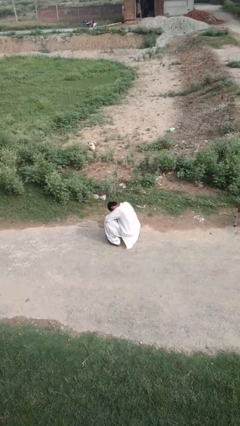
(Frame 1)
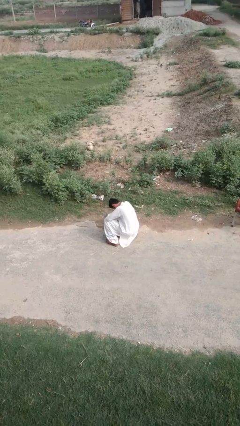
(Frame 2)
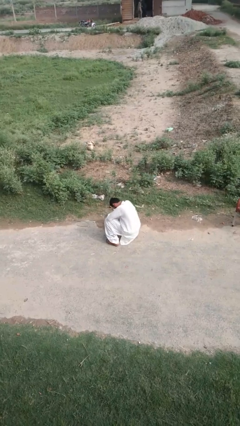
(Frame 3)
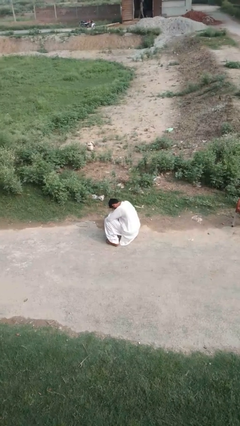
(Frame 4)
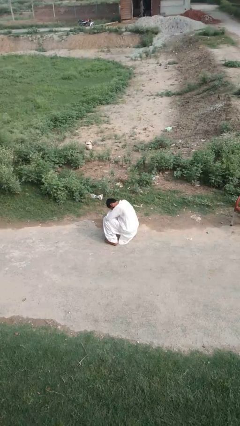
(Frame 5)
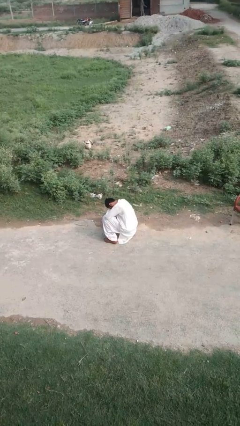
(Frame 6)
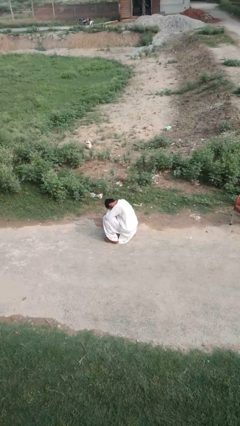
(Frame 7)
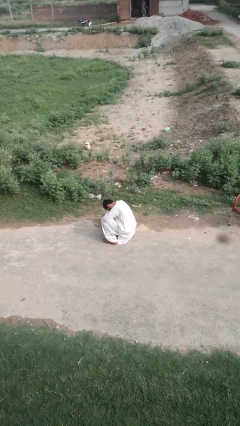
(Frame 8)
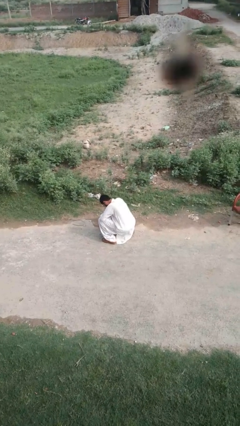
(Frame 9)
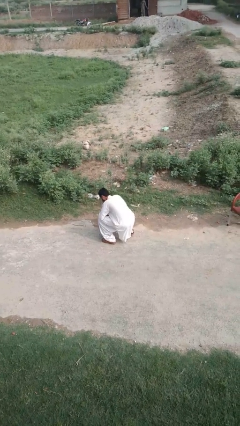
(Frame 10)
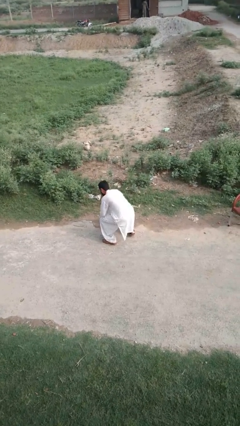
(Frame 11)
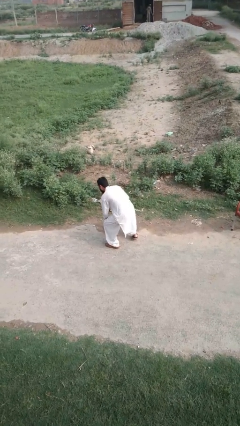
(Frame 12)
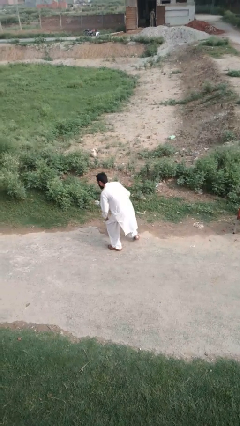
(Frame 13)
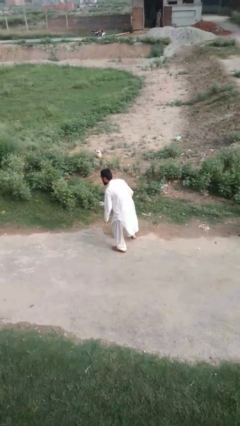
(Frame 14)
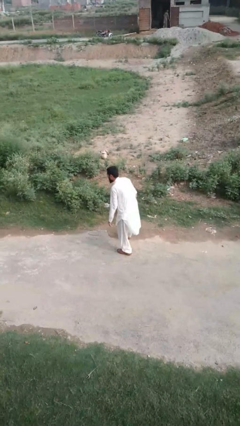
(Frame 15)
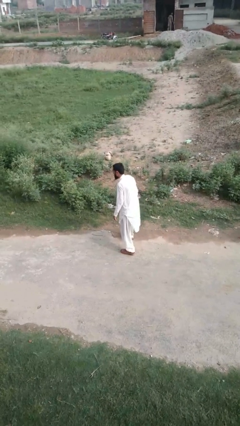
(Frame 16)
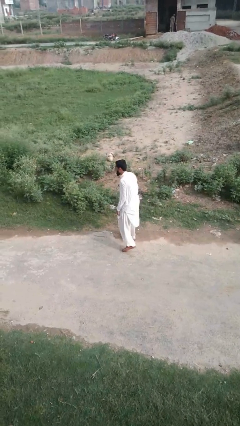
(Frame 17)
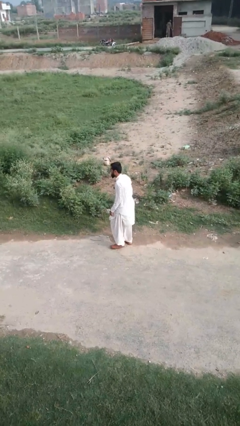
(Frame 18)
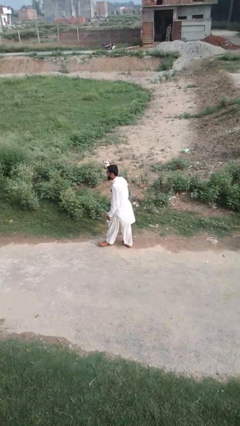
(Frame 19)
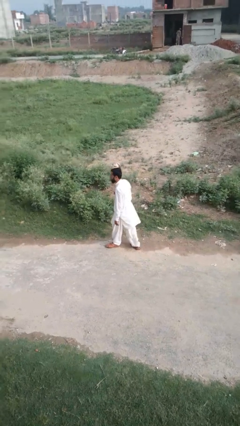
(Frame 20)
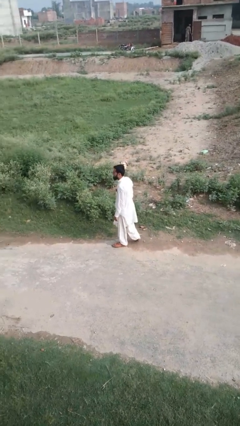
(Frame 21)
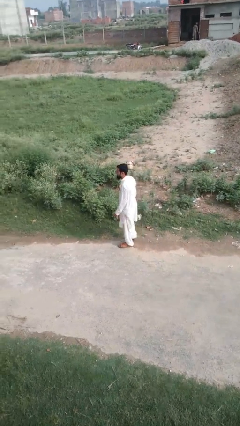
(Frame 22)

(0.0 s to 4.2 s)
person stands up from floor

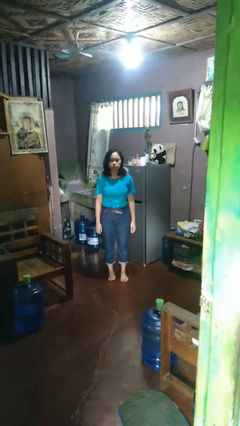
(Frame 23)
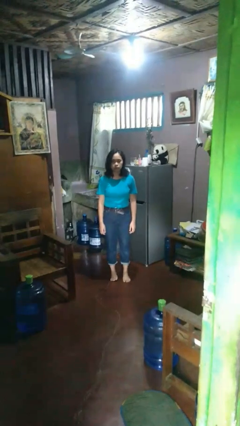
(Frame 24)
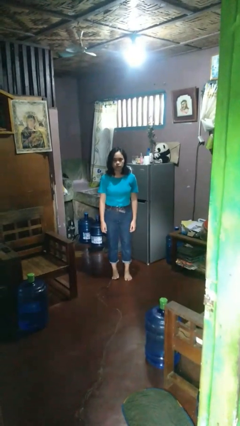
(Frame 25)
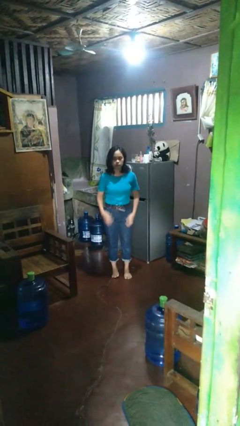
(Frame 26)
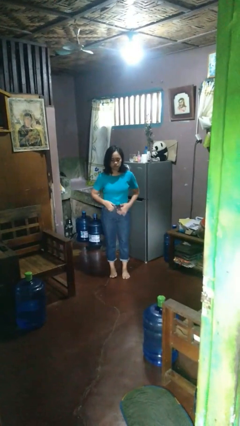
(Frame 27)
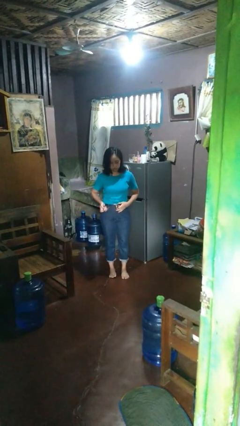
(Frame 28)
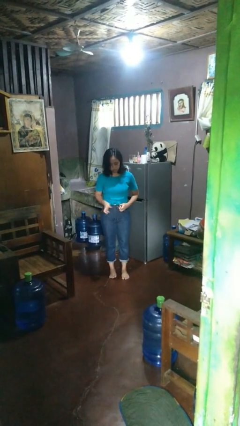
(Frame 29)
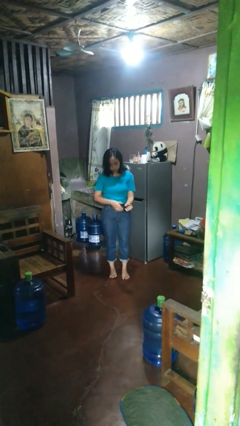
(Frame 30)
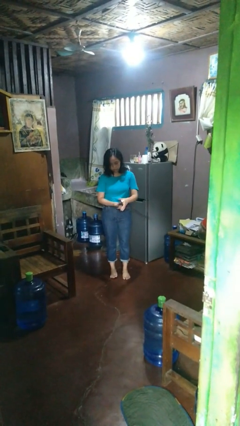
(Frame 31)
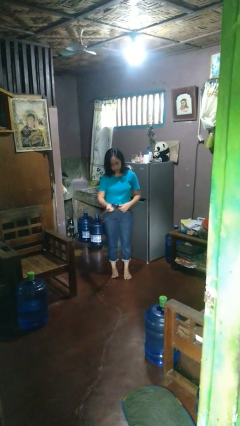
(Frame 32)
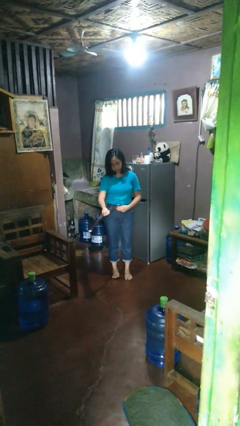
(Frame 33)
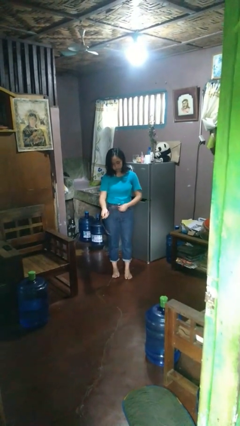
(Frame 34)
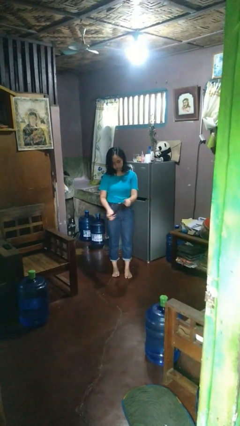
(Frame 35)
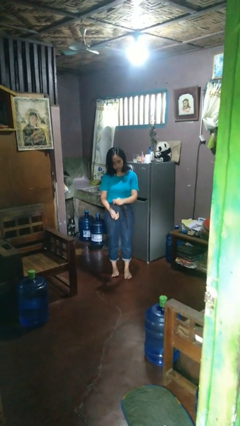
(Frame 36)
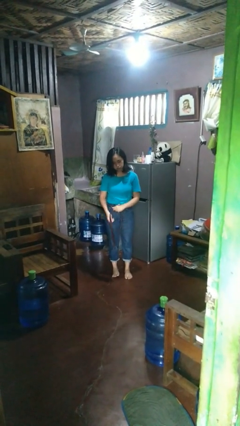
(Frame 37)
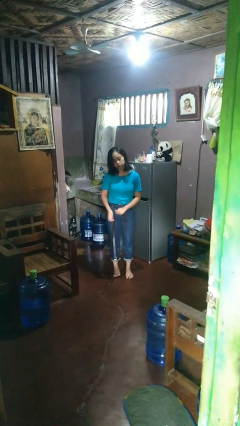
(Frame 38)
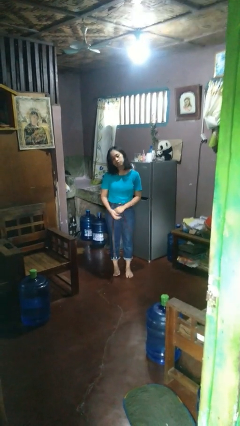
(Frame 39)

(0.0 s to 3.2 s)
person takes off belt

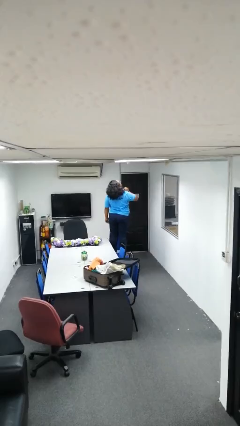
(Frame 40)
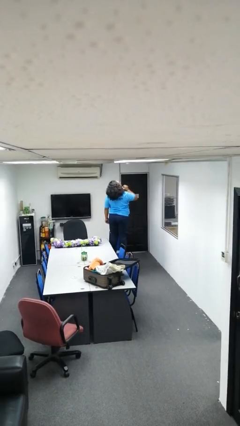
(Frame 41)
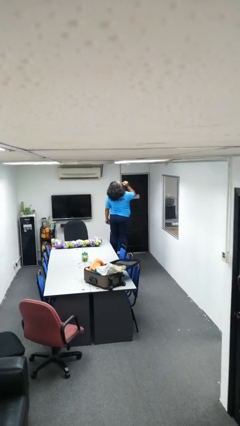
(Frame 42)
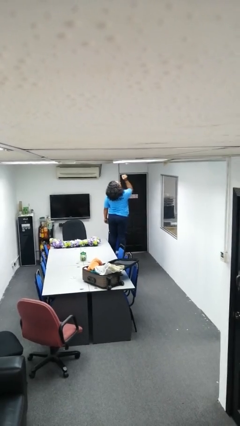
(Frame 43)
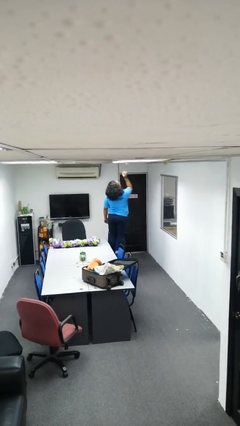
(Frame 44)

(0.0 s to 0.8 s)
person takes down smoke detector

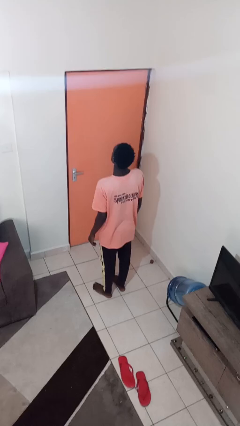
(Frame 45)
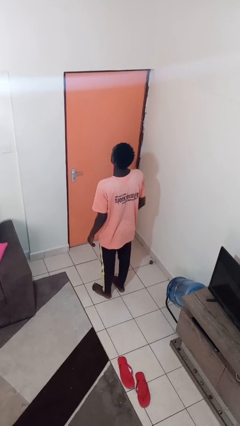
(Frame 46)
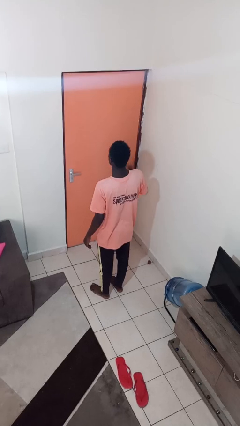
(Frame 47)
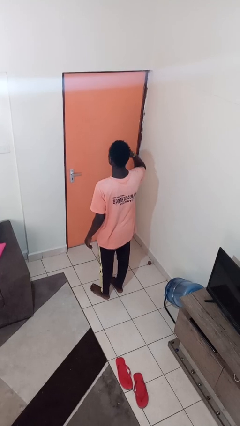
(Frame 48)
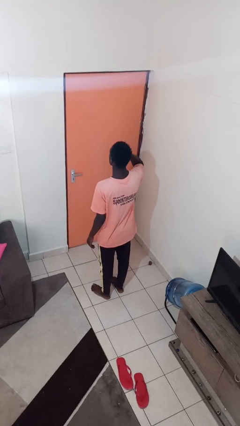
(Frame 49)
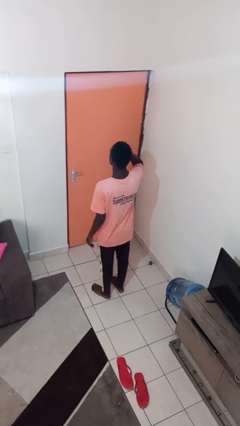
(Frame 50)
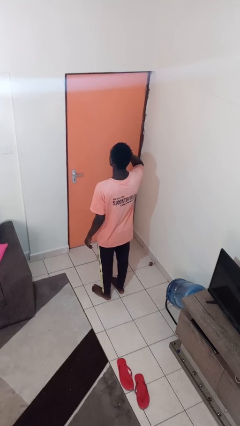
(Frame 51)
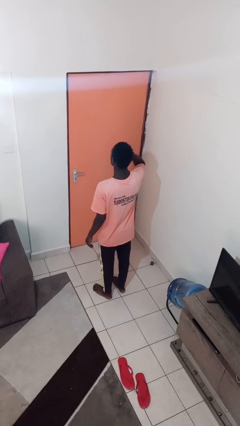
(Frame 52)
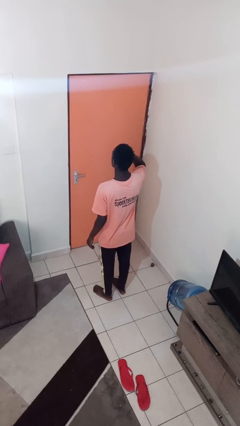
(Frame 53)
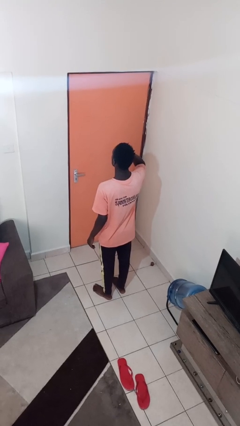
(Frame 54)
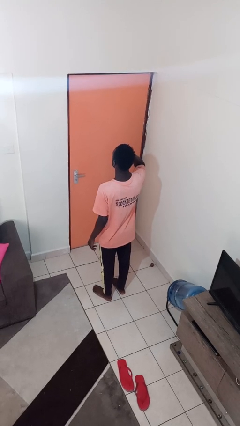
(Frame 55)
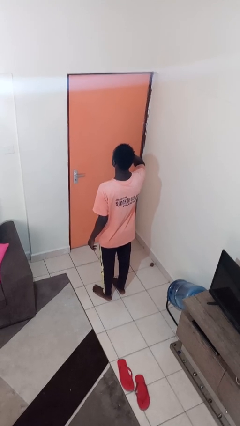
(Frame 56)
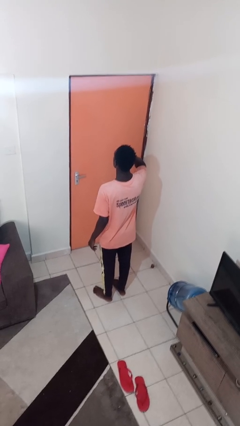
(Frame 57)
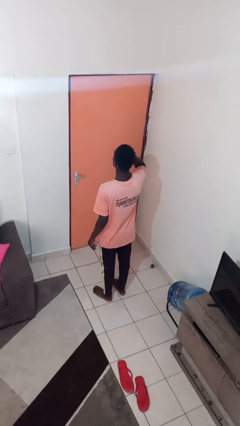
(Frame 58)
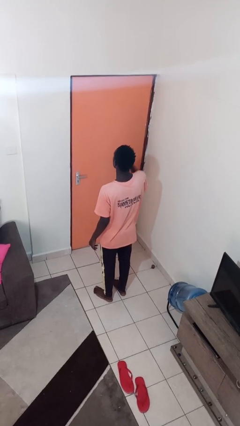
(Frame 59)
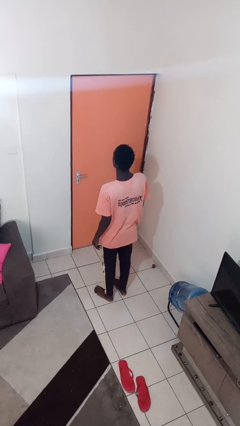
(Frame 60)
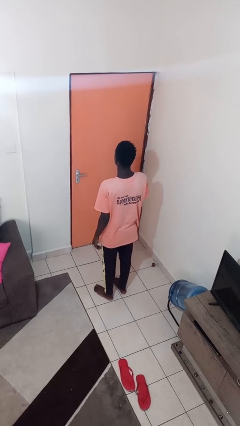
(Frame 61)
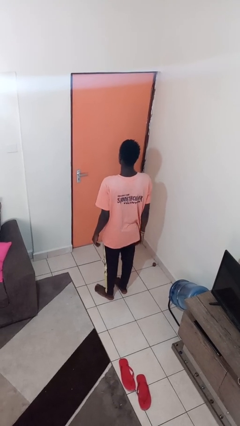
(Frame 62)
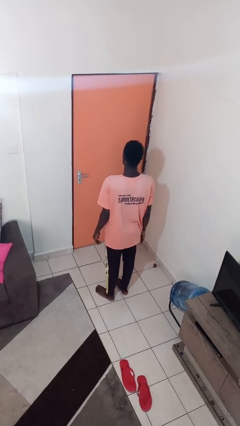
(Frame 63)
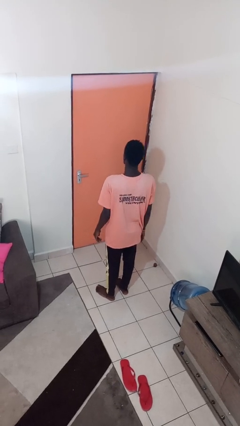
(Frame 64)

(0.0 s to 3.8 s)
person gestures call me

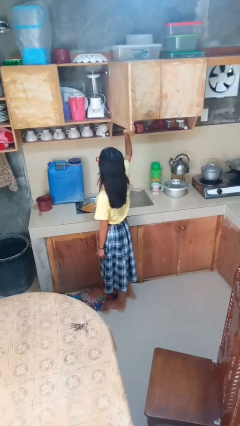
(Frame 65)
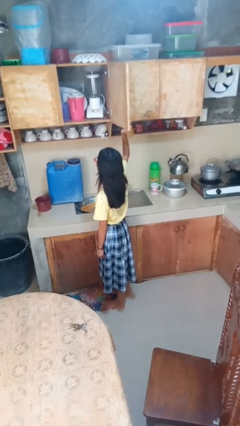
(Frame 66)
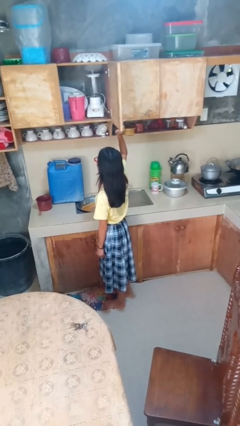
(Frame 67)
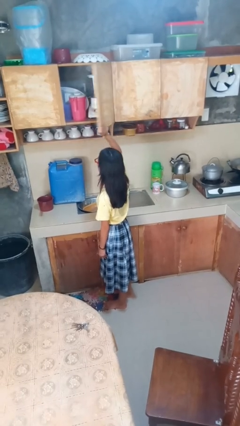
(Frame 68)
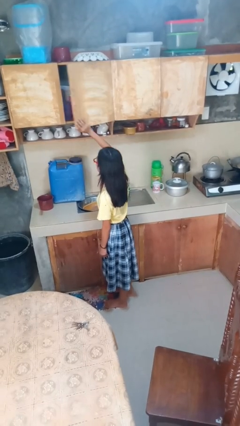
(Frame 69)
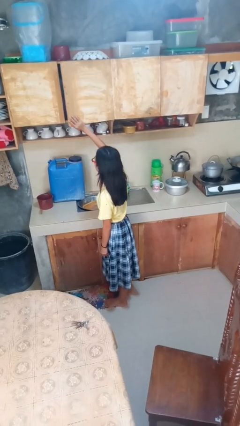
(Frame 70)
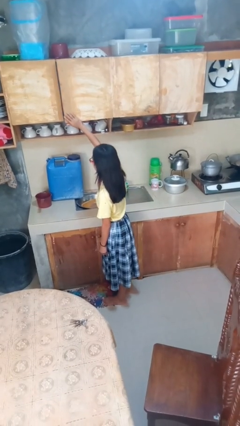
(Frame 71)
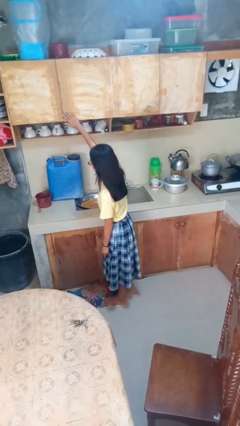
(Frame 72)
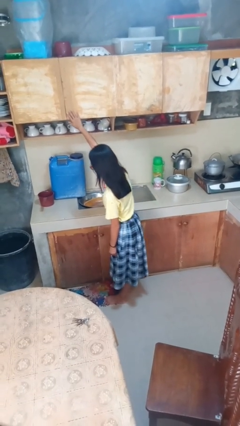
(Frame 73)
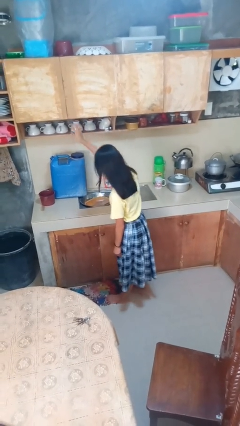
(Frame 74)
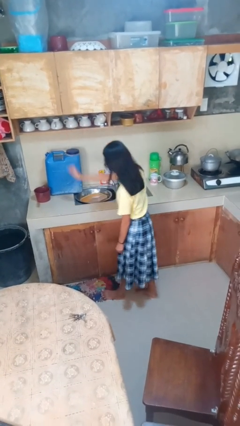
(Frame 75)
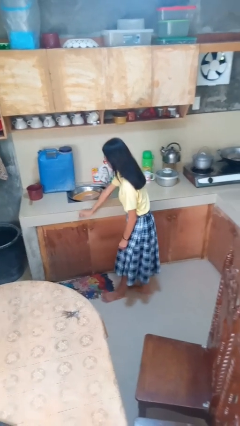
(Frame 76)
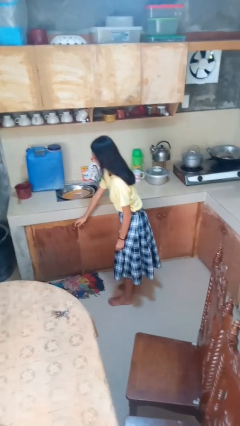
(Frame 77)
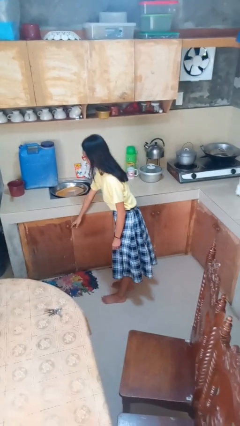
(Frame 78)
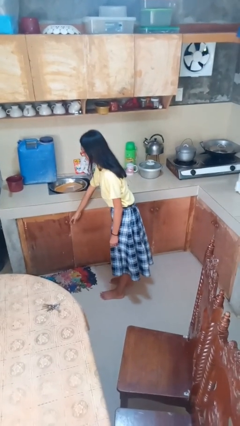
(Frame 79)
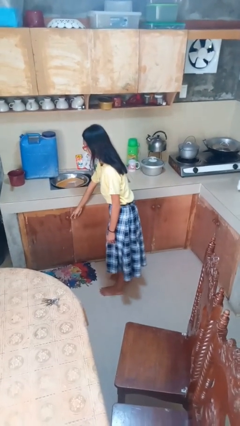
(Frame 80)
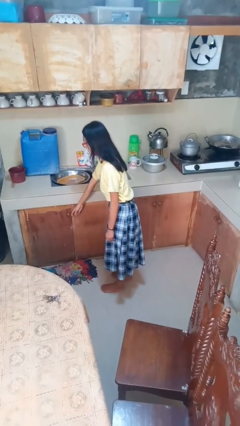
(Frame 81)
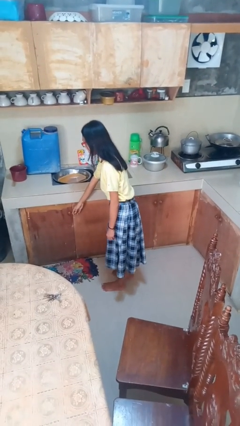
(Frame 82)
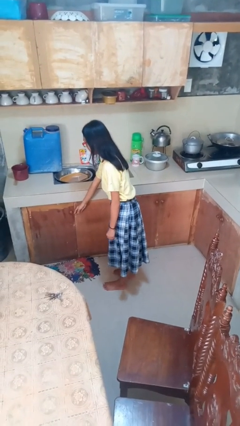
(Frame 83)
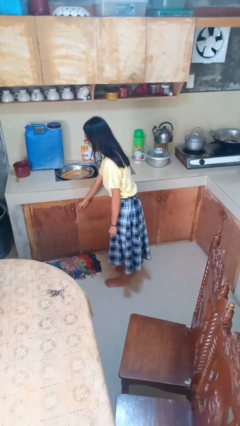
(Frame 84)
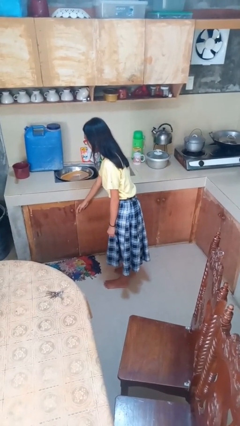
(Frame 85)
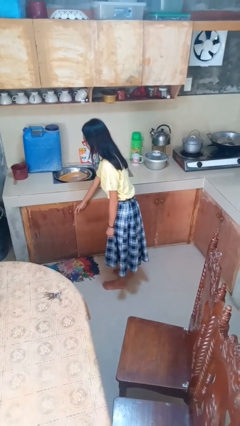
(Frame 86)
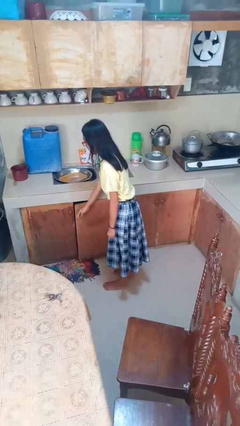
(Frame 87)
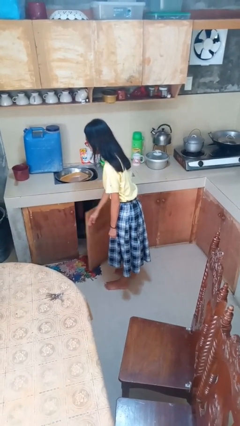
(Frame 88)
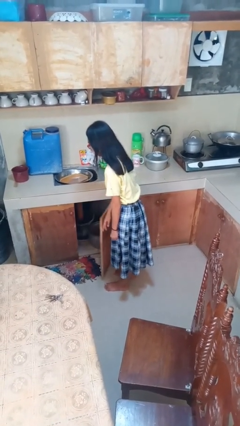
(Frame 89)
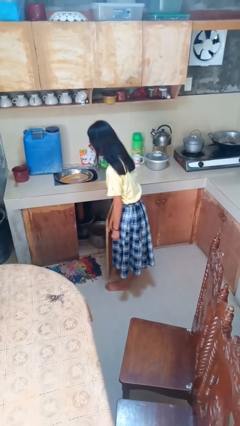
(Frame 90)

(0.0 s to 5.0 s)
person closes cabinet

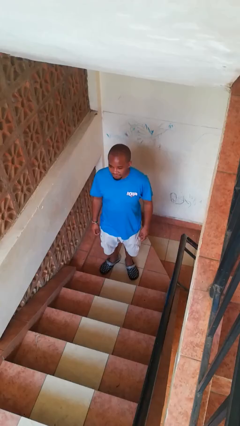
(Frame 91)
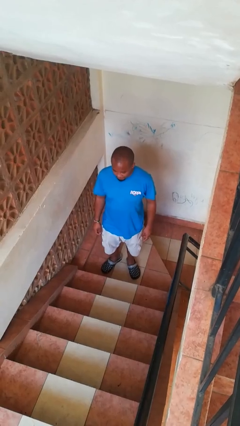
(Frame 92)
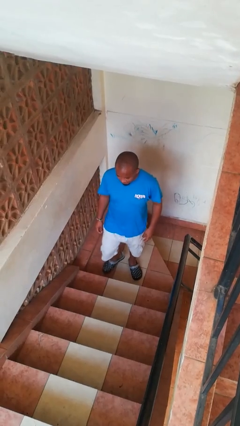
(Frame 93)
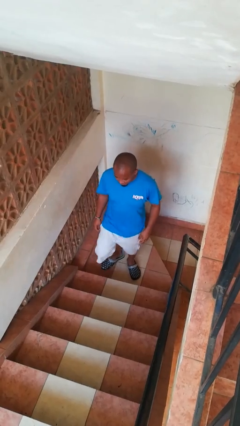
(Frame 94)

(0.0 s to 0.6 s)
person climbs down stairs
